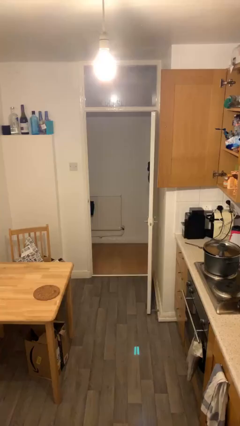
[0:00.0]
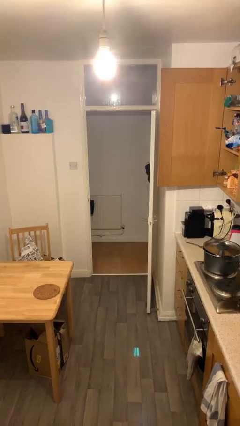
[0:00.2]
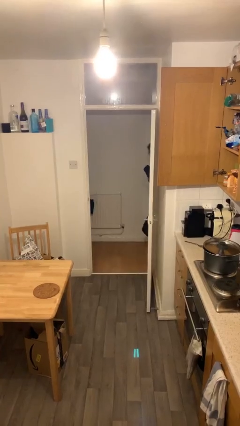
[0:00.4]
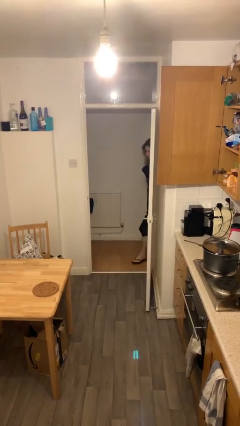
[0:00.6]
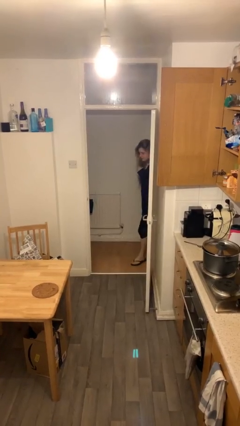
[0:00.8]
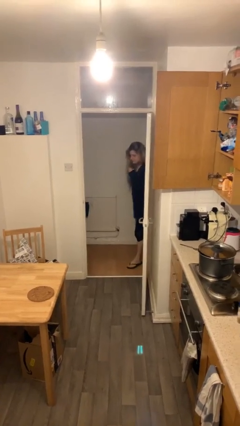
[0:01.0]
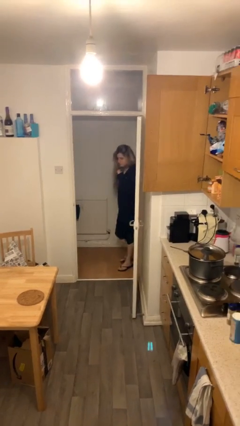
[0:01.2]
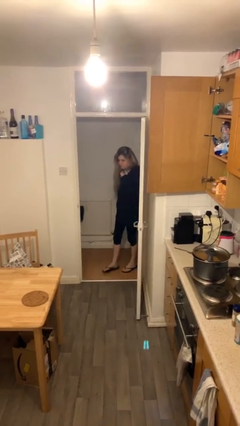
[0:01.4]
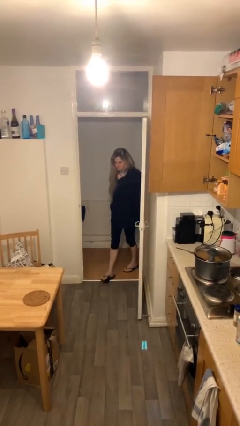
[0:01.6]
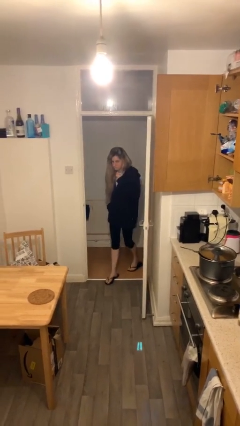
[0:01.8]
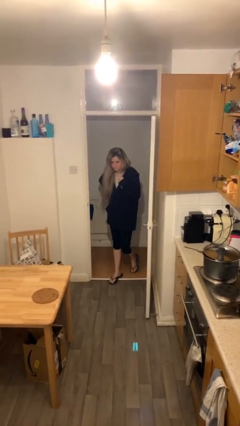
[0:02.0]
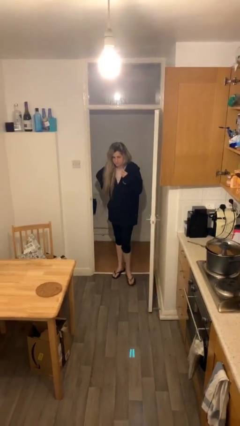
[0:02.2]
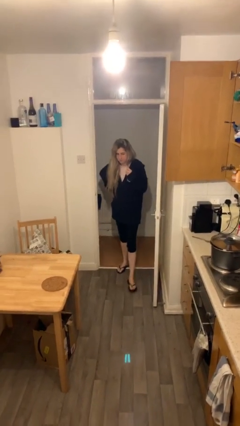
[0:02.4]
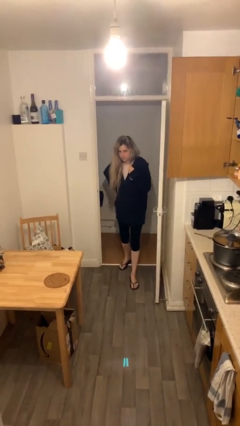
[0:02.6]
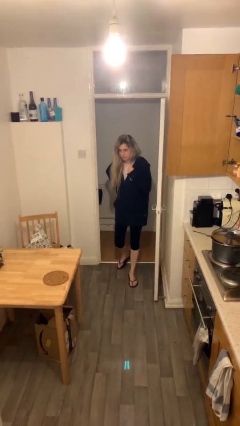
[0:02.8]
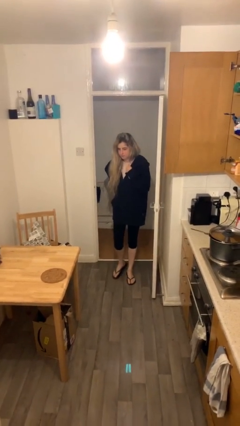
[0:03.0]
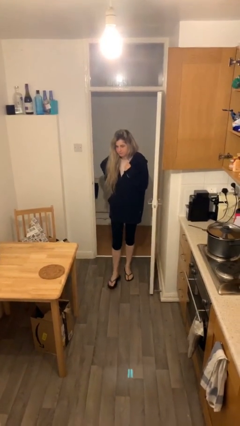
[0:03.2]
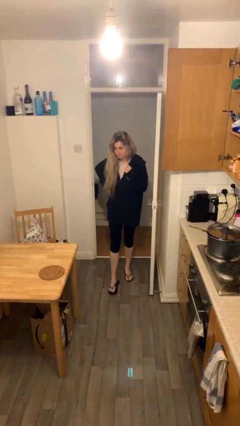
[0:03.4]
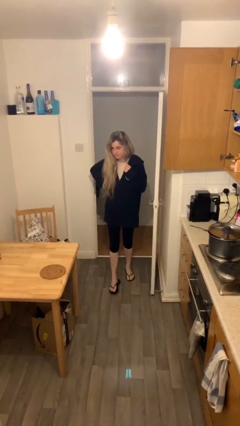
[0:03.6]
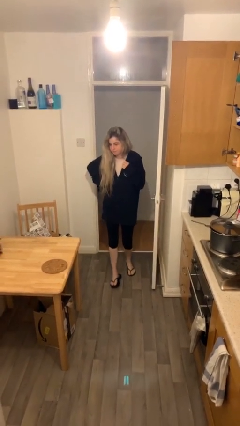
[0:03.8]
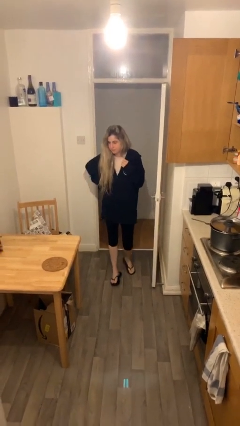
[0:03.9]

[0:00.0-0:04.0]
person enters scene through structure

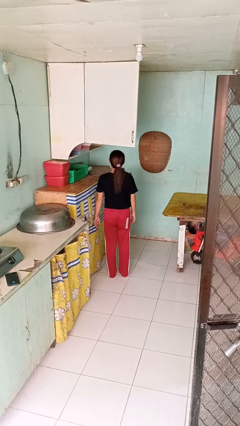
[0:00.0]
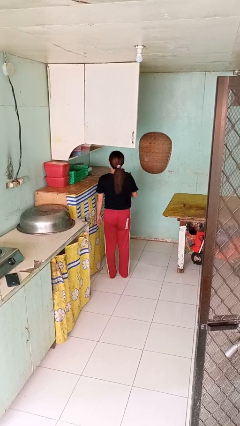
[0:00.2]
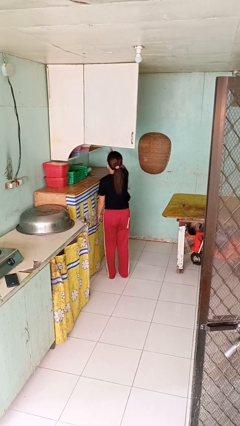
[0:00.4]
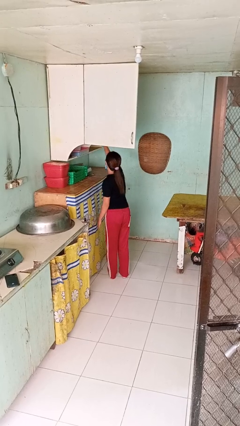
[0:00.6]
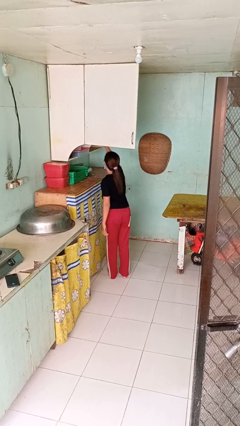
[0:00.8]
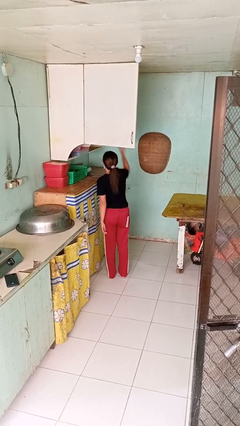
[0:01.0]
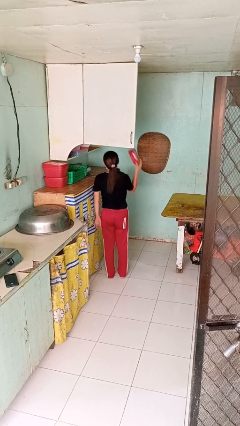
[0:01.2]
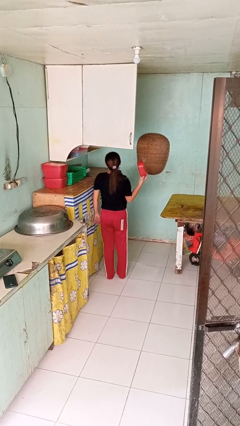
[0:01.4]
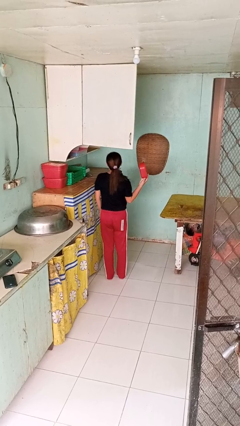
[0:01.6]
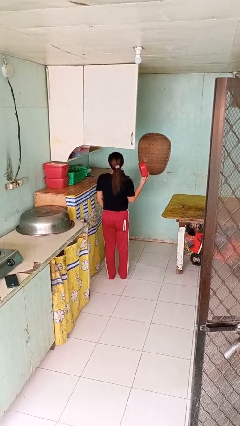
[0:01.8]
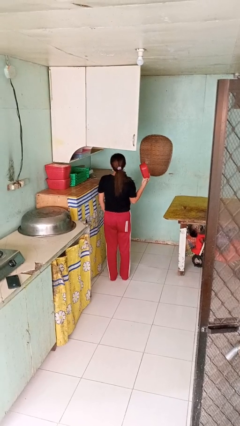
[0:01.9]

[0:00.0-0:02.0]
person takes object from cabinet

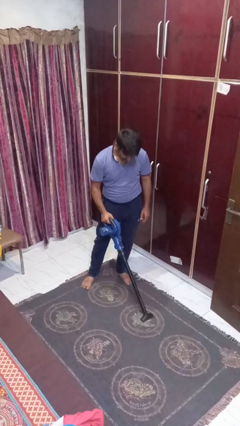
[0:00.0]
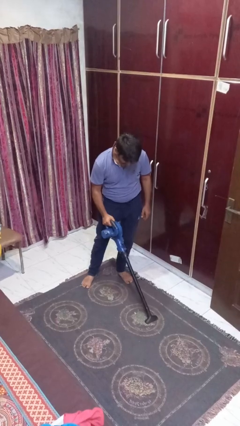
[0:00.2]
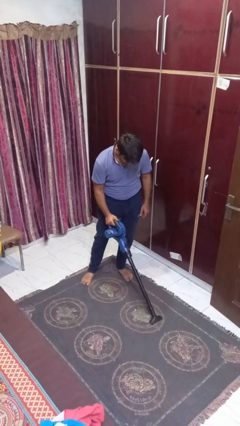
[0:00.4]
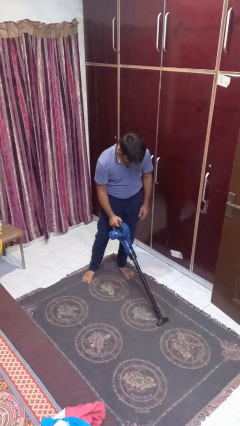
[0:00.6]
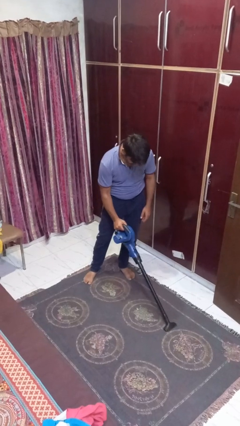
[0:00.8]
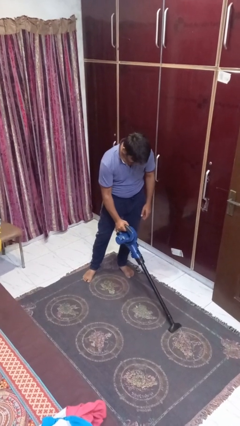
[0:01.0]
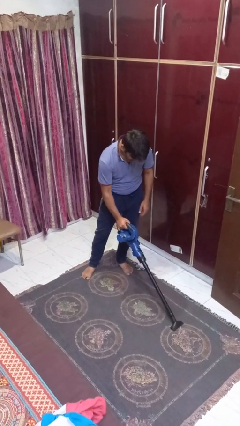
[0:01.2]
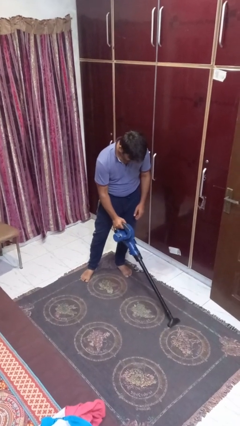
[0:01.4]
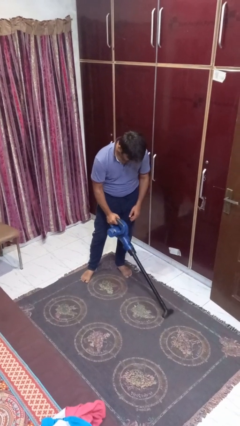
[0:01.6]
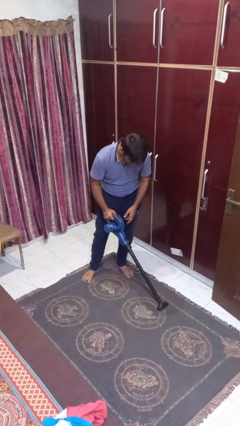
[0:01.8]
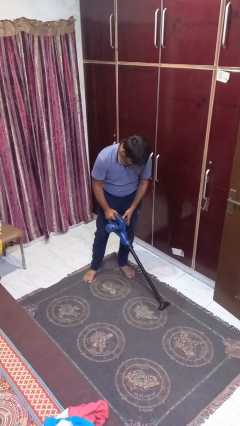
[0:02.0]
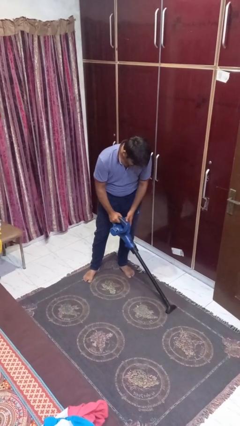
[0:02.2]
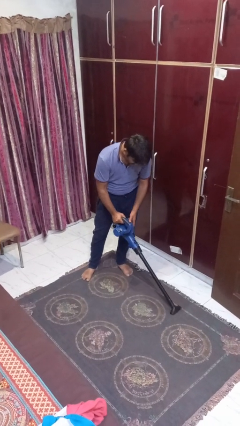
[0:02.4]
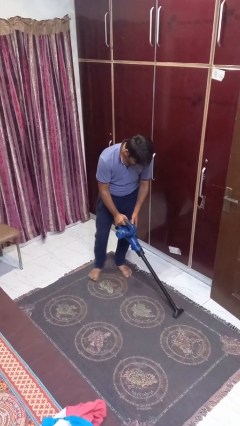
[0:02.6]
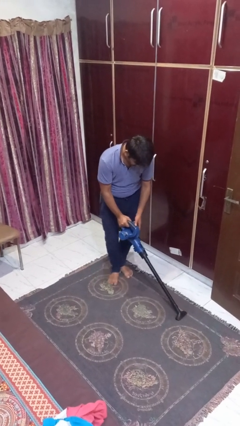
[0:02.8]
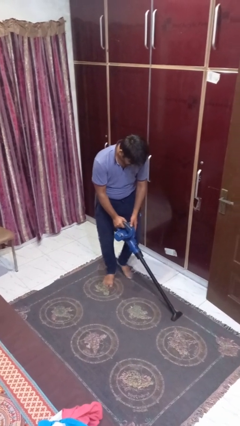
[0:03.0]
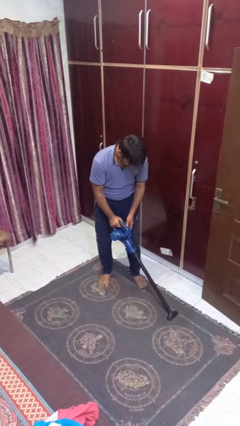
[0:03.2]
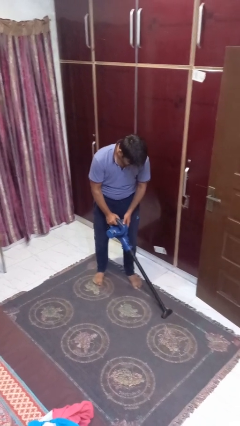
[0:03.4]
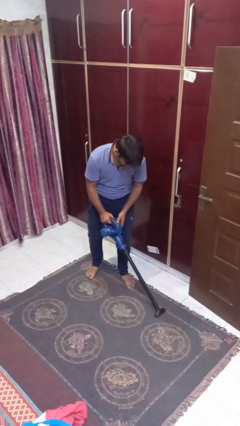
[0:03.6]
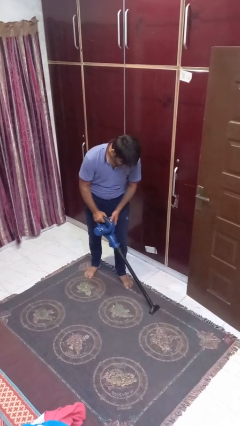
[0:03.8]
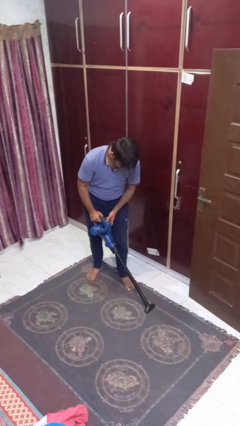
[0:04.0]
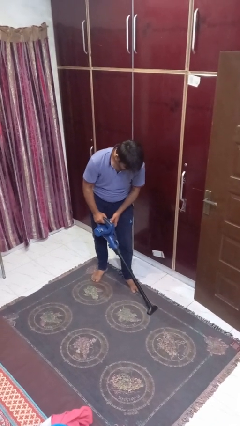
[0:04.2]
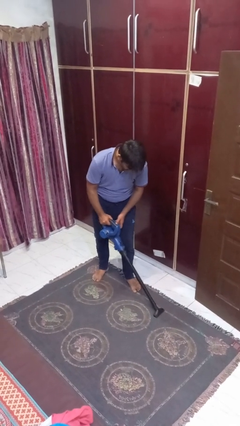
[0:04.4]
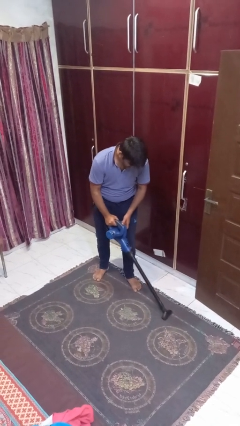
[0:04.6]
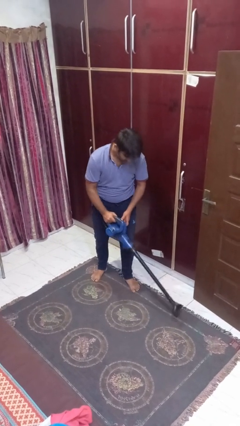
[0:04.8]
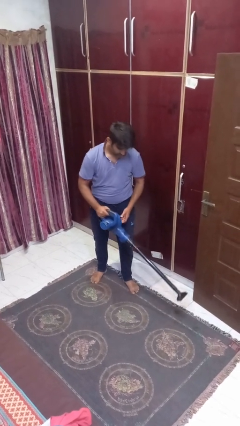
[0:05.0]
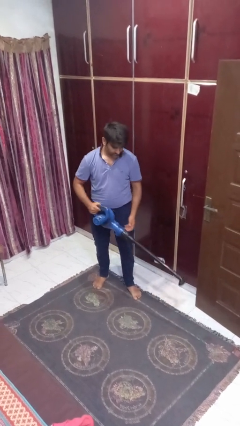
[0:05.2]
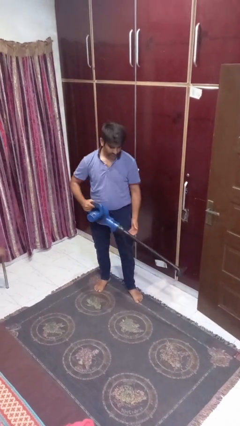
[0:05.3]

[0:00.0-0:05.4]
person vacuums carpet

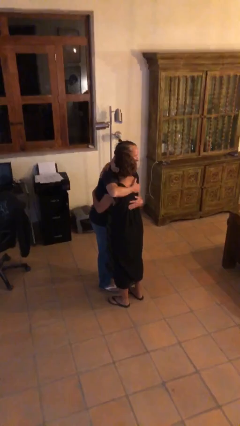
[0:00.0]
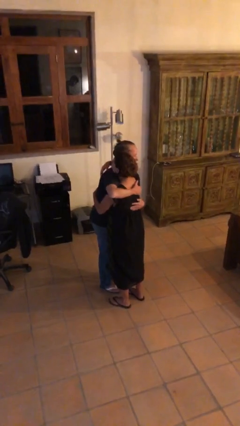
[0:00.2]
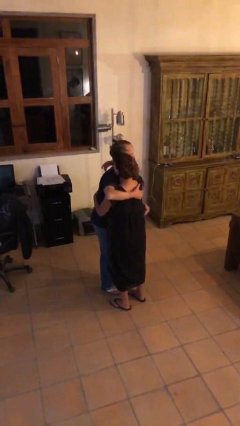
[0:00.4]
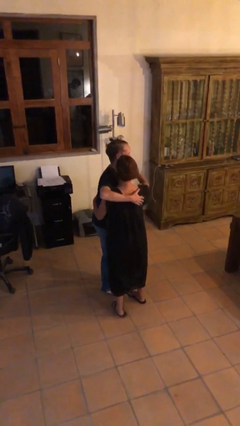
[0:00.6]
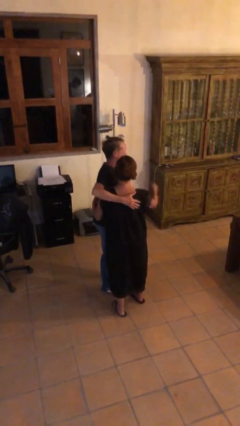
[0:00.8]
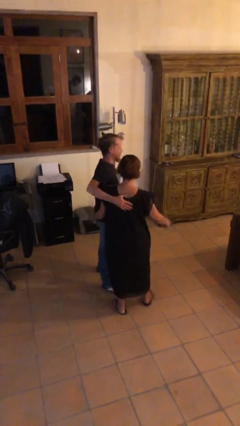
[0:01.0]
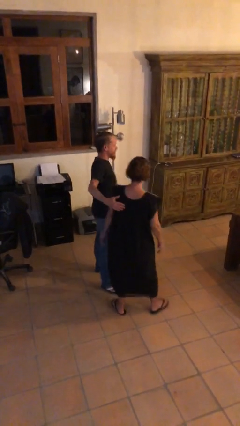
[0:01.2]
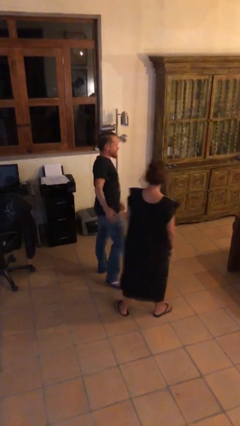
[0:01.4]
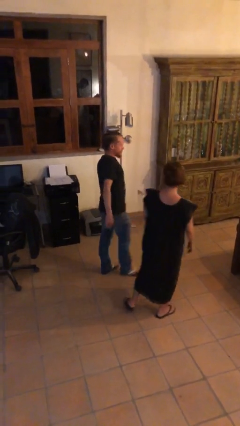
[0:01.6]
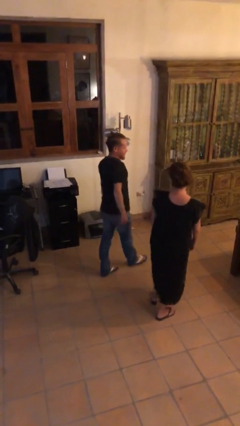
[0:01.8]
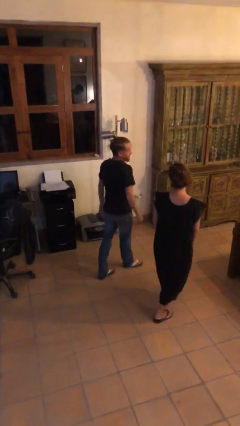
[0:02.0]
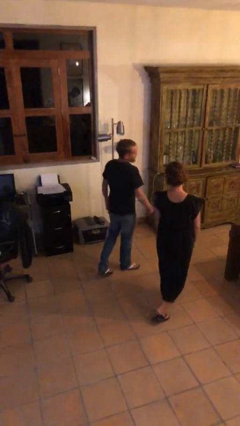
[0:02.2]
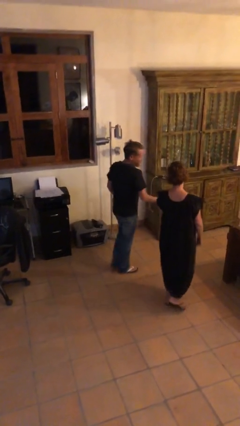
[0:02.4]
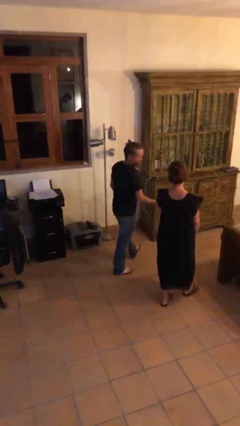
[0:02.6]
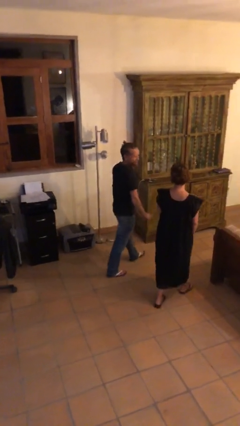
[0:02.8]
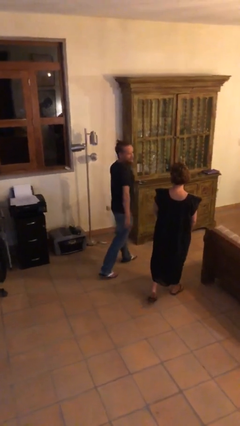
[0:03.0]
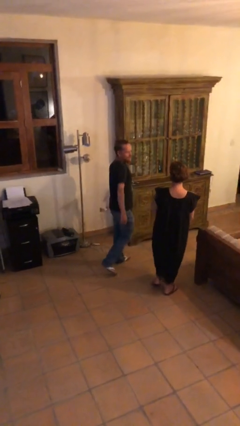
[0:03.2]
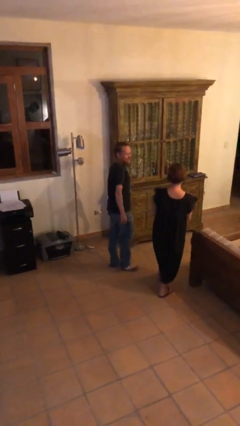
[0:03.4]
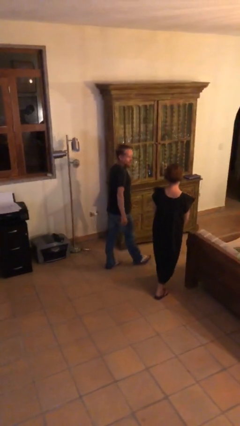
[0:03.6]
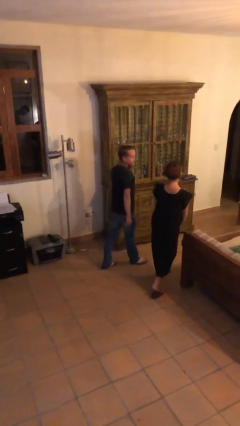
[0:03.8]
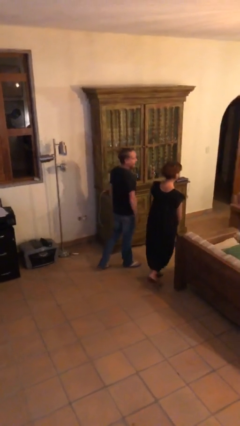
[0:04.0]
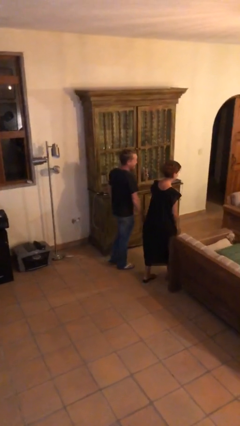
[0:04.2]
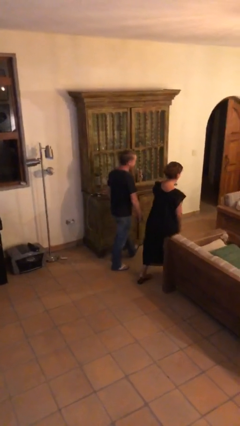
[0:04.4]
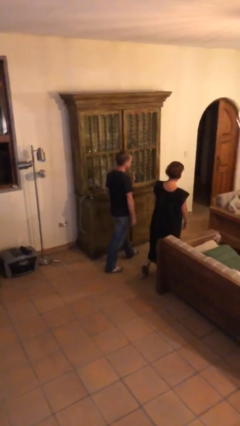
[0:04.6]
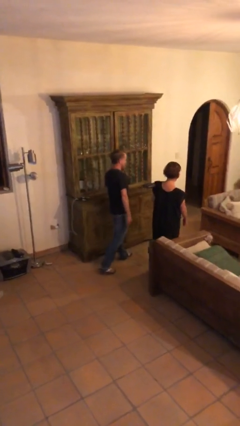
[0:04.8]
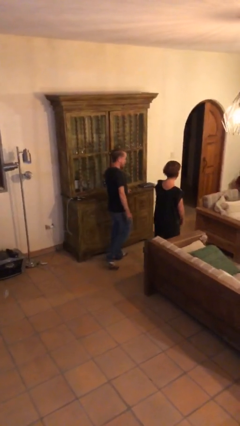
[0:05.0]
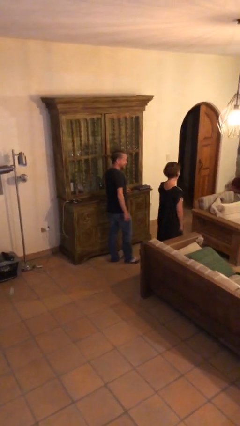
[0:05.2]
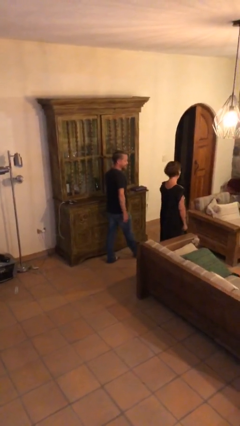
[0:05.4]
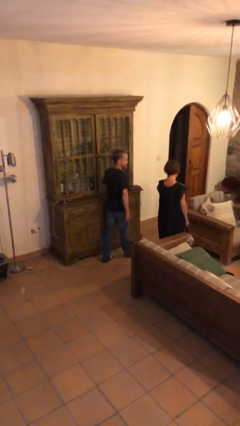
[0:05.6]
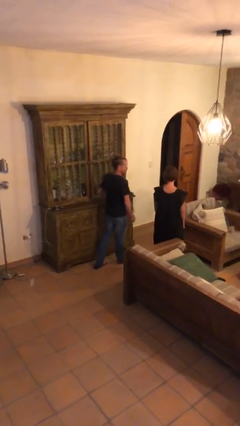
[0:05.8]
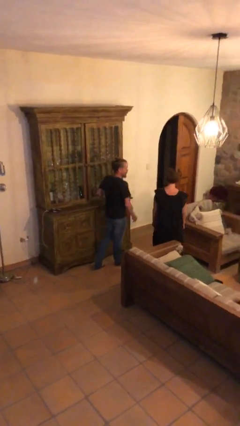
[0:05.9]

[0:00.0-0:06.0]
person talks to person

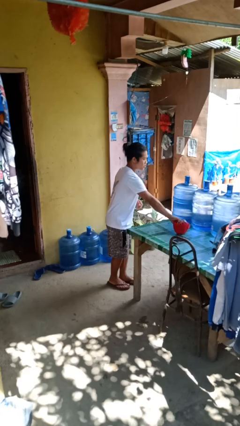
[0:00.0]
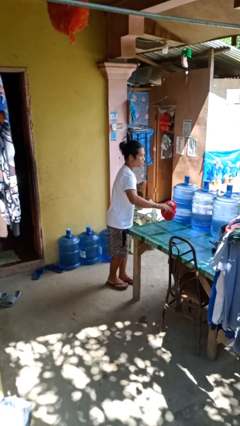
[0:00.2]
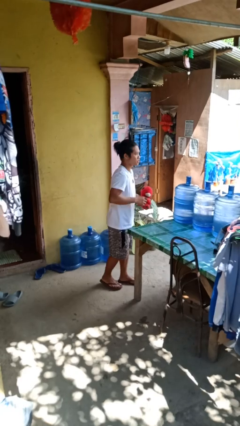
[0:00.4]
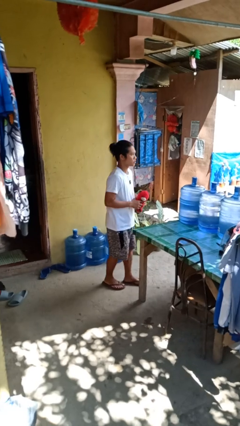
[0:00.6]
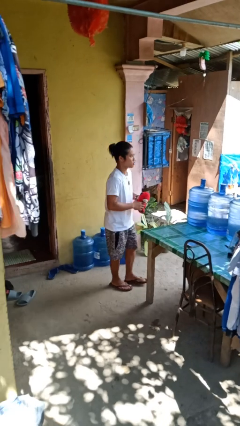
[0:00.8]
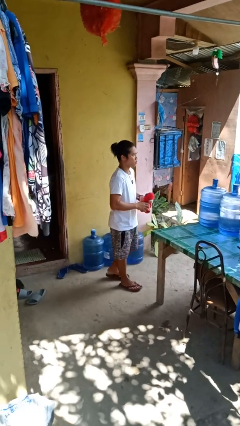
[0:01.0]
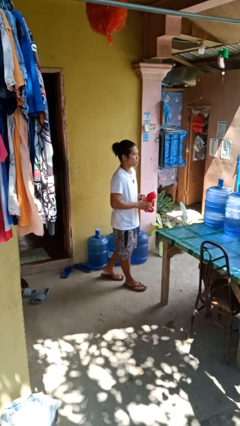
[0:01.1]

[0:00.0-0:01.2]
person picks up object from table
